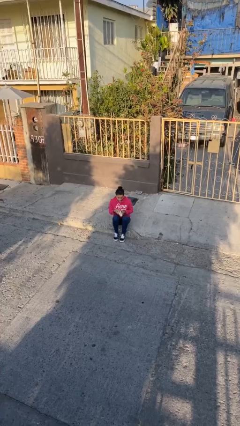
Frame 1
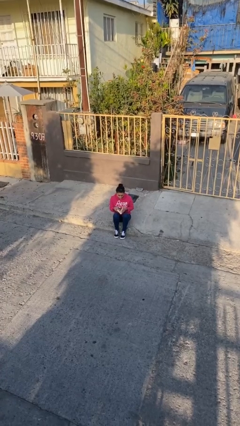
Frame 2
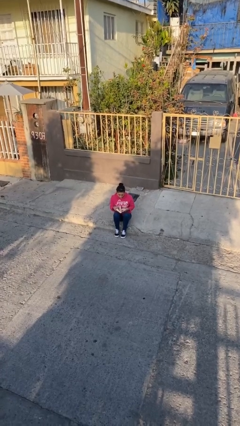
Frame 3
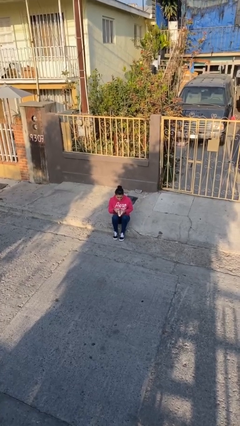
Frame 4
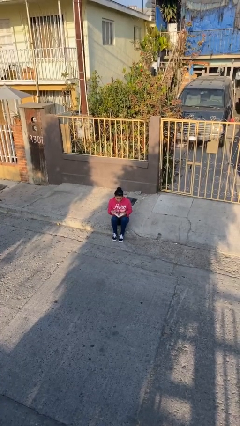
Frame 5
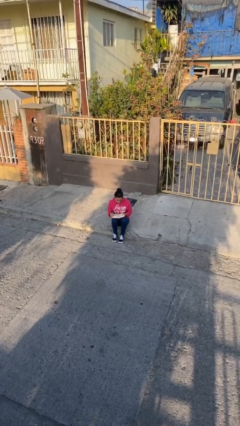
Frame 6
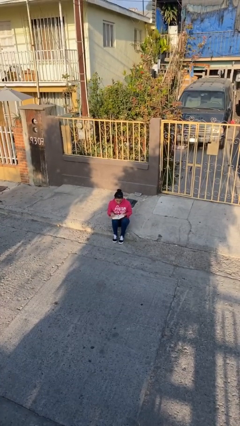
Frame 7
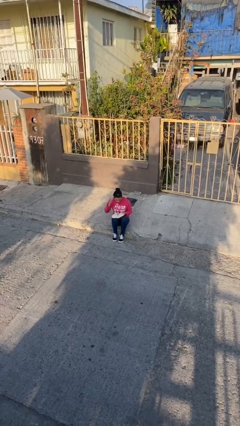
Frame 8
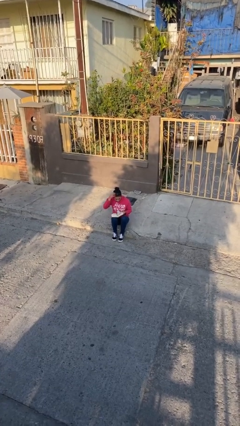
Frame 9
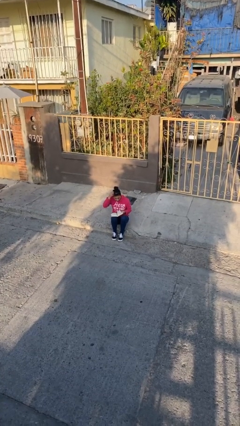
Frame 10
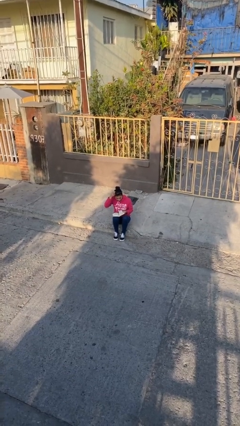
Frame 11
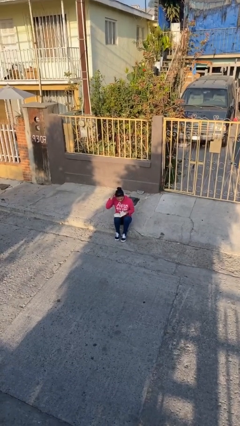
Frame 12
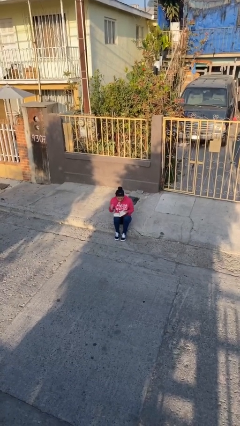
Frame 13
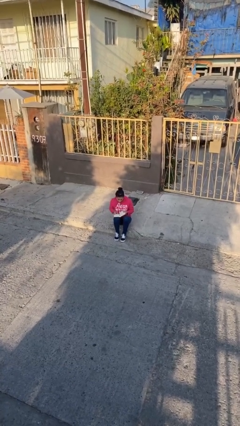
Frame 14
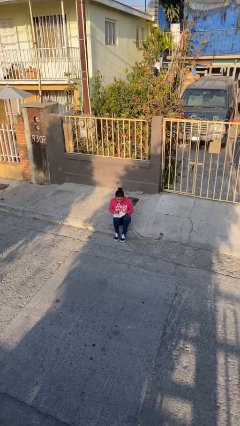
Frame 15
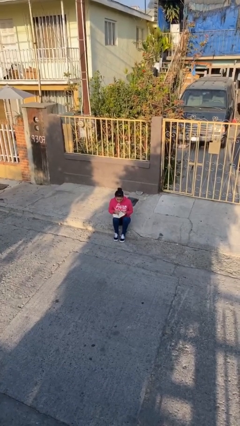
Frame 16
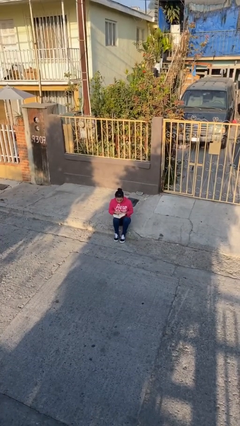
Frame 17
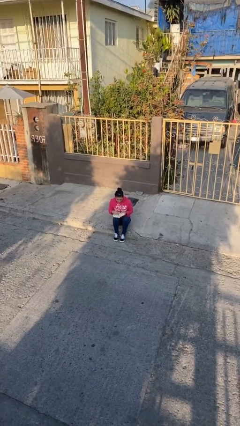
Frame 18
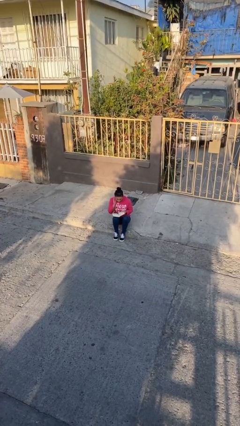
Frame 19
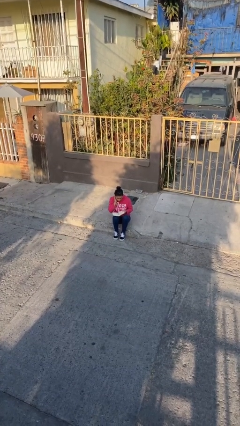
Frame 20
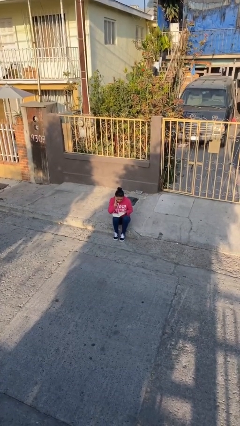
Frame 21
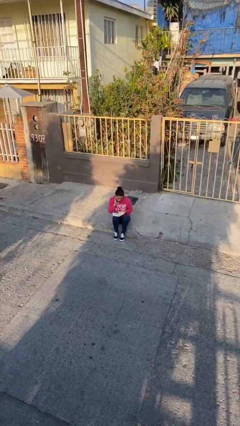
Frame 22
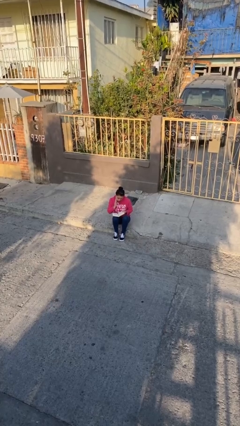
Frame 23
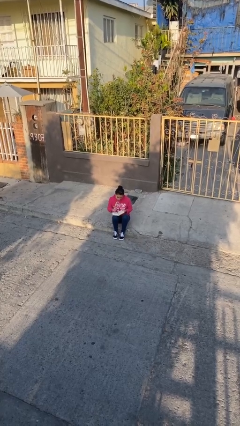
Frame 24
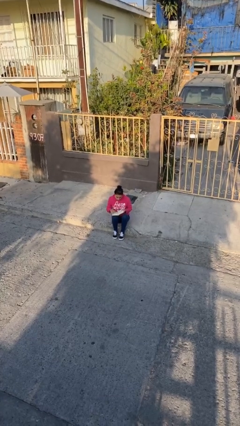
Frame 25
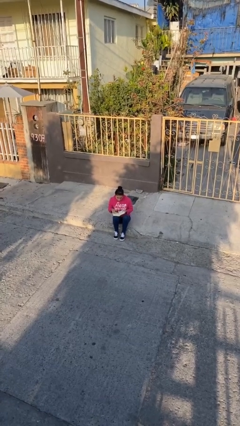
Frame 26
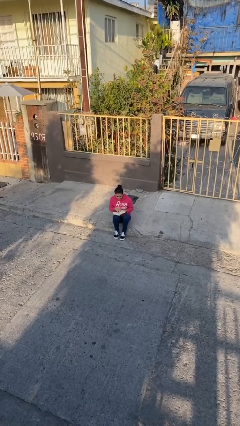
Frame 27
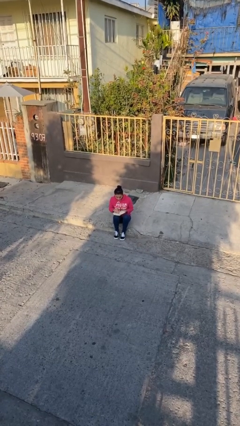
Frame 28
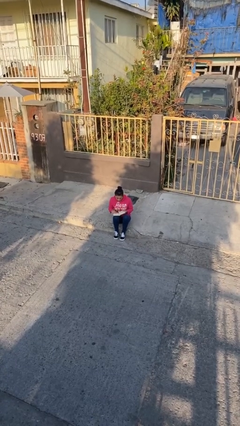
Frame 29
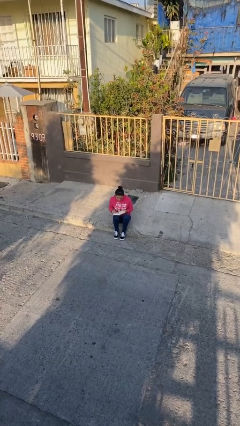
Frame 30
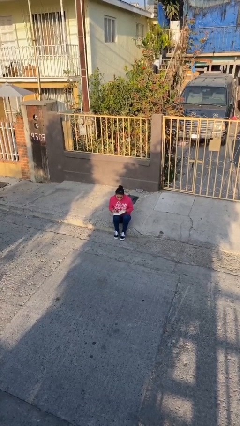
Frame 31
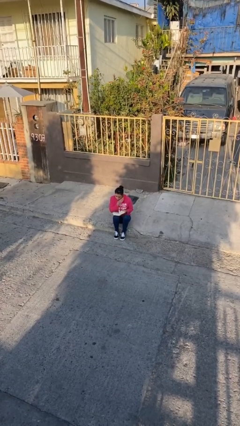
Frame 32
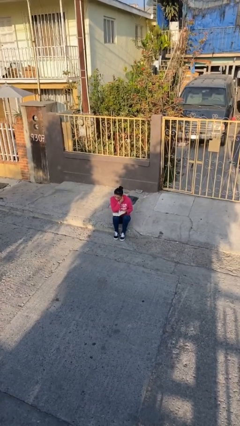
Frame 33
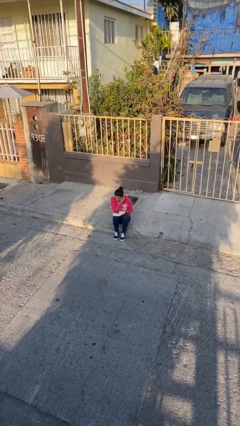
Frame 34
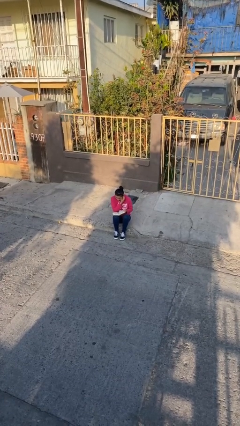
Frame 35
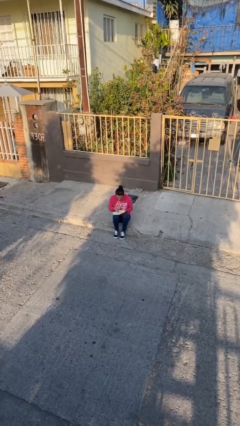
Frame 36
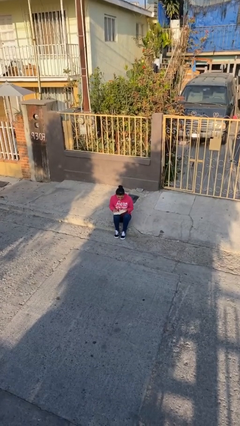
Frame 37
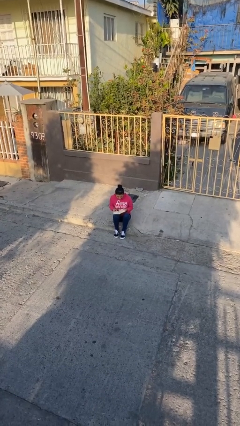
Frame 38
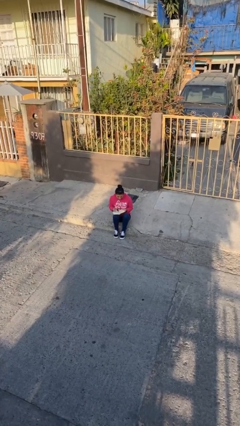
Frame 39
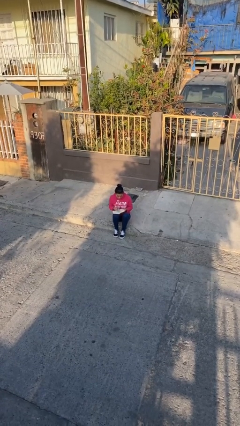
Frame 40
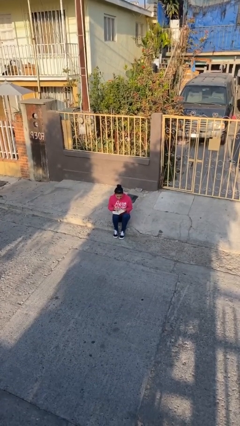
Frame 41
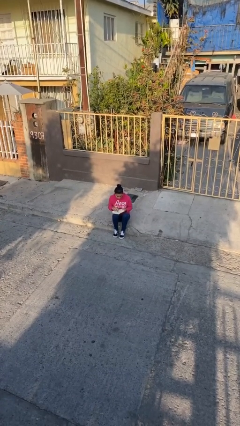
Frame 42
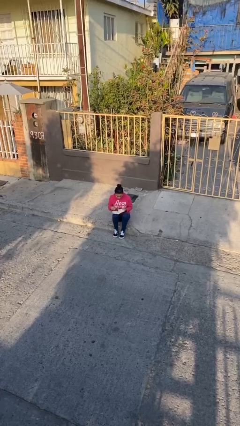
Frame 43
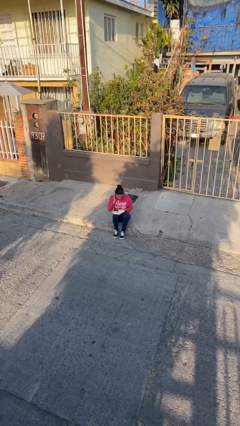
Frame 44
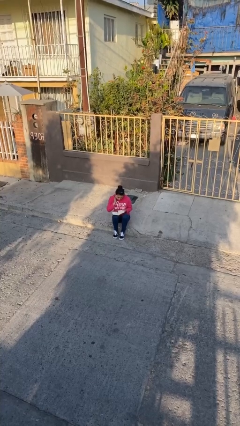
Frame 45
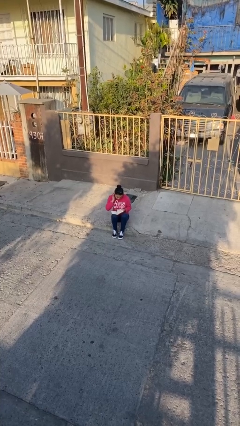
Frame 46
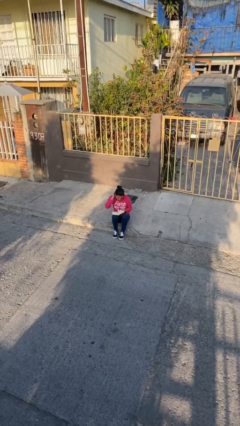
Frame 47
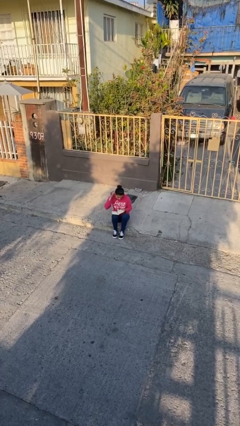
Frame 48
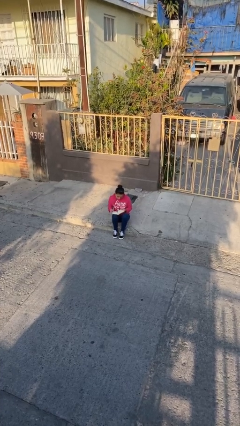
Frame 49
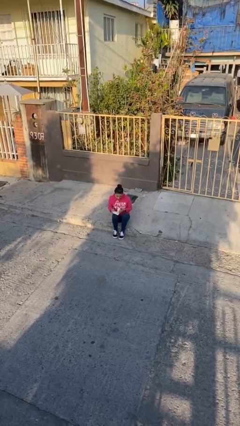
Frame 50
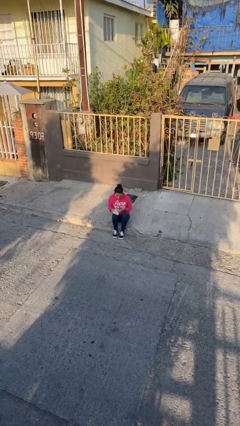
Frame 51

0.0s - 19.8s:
person reads document

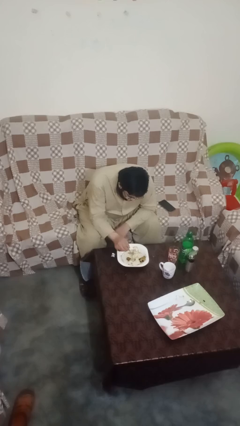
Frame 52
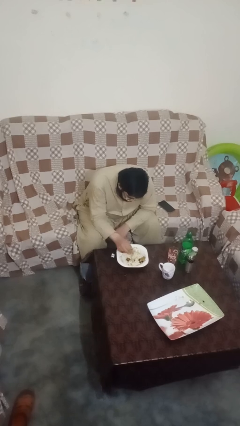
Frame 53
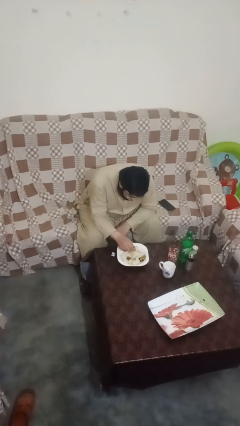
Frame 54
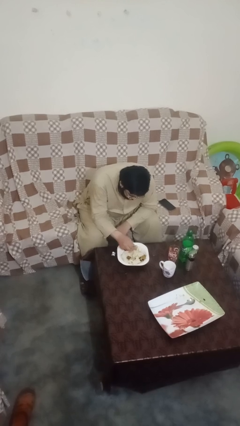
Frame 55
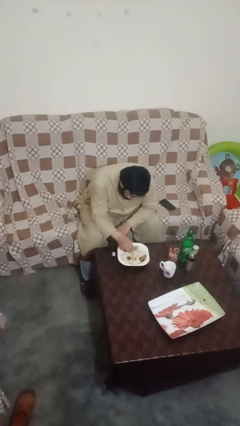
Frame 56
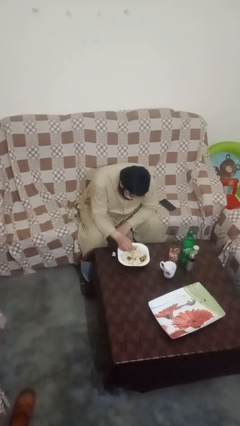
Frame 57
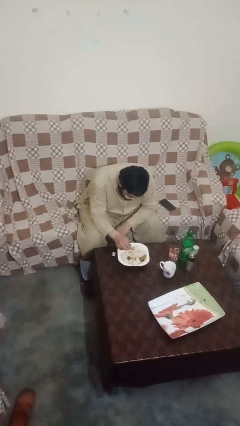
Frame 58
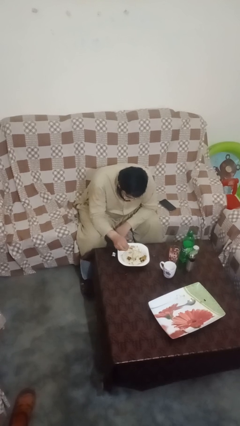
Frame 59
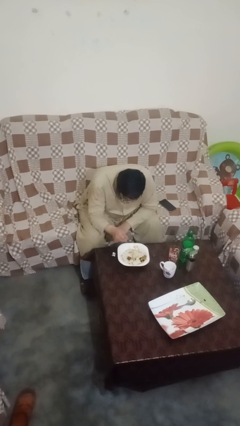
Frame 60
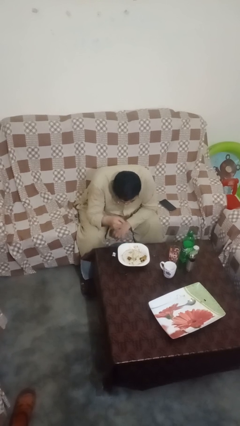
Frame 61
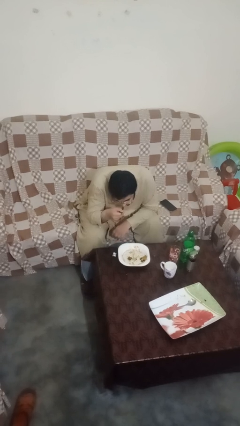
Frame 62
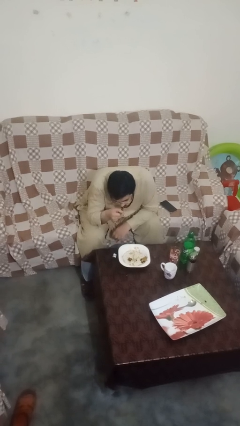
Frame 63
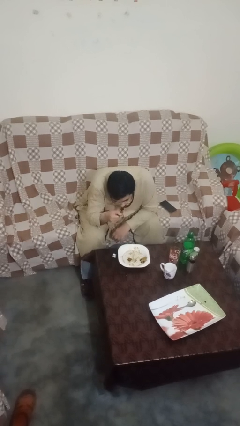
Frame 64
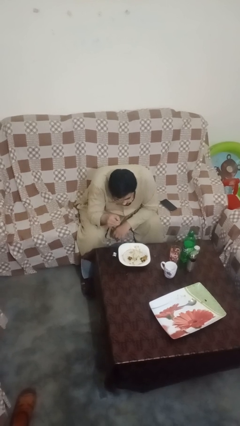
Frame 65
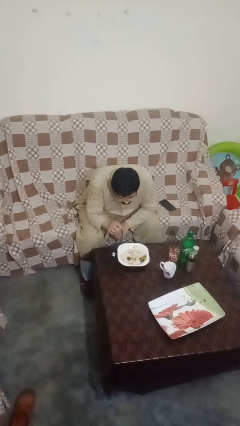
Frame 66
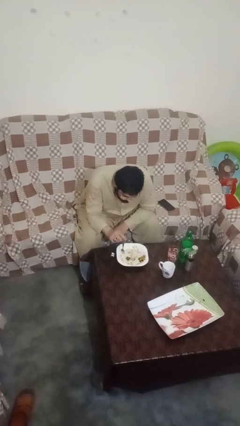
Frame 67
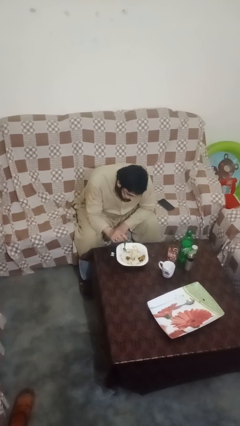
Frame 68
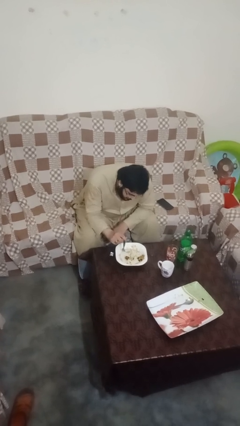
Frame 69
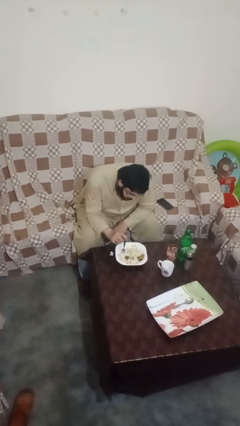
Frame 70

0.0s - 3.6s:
person eats with utensil

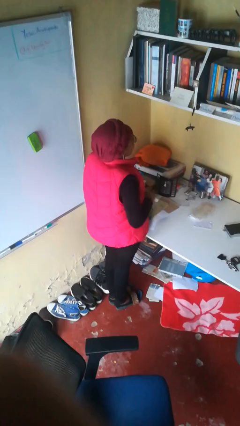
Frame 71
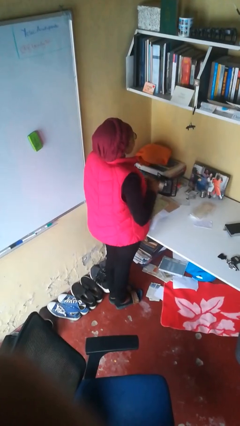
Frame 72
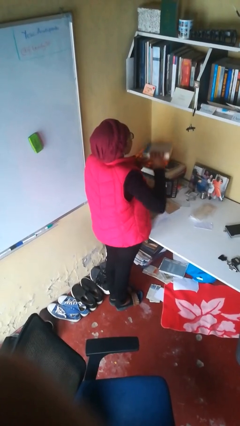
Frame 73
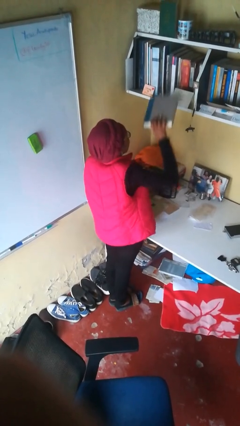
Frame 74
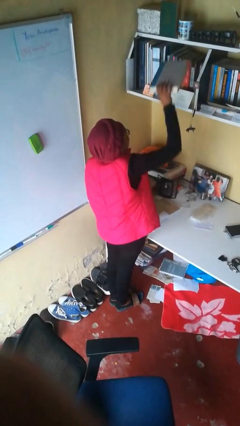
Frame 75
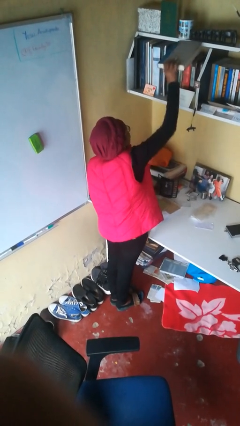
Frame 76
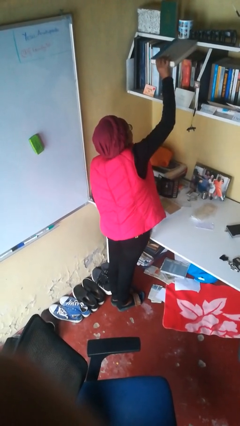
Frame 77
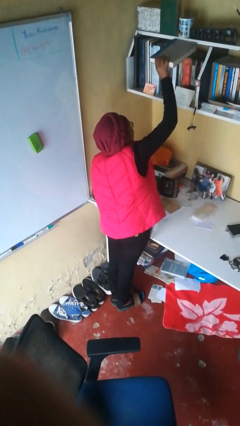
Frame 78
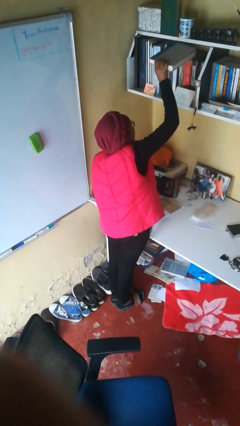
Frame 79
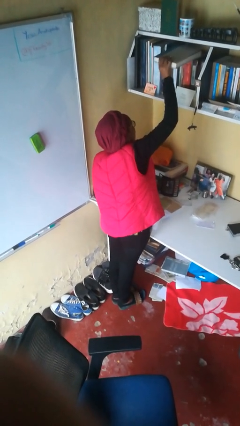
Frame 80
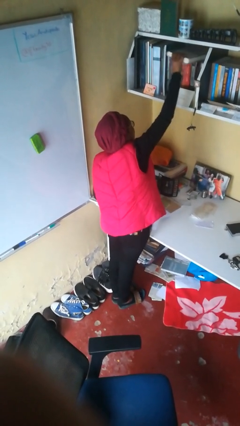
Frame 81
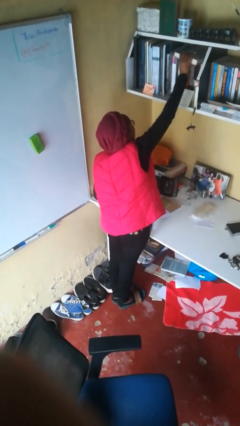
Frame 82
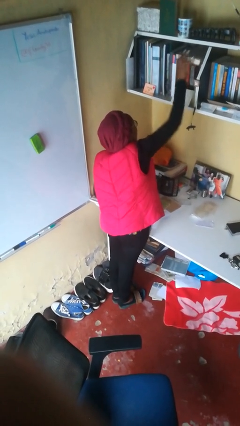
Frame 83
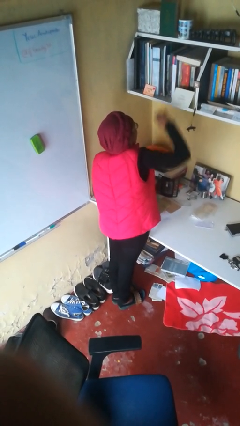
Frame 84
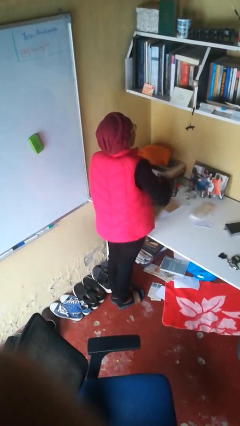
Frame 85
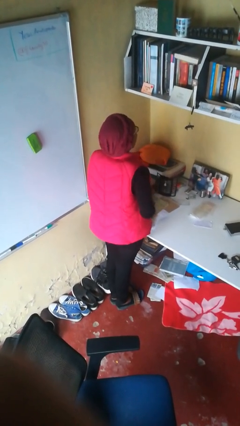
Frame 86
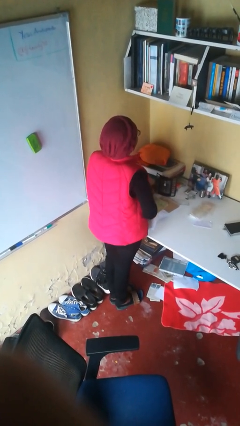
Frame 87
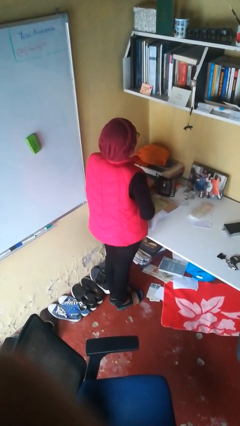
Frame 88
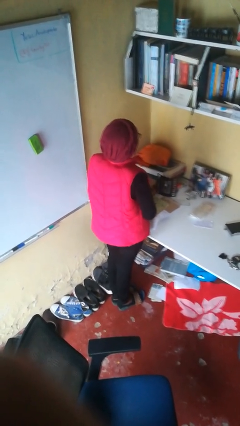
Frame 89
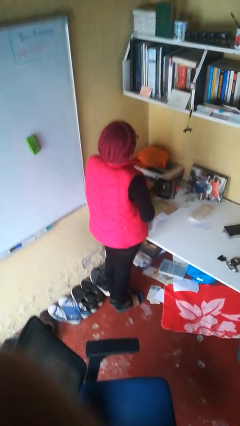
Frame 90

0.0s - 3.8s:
person puts down object on shelf

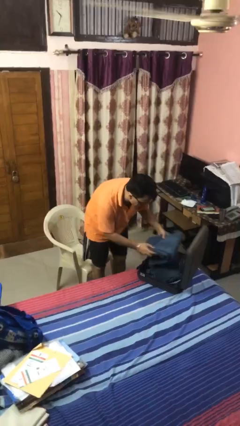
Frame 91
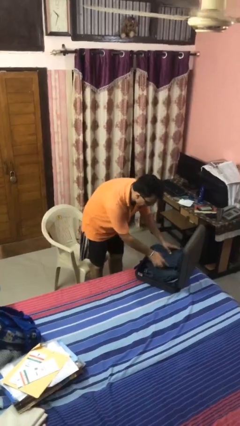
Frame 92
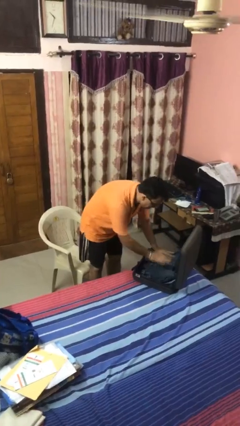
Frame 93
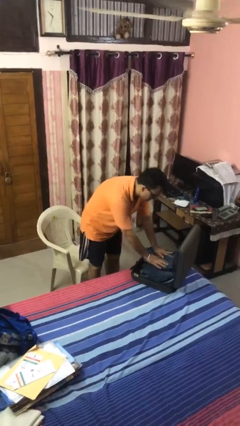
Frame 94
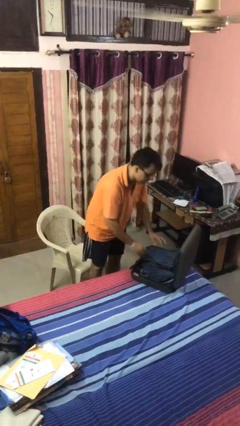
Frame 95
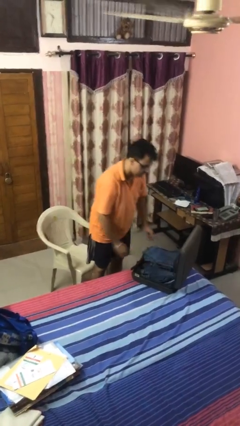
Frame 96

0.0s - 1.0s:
person loads clothes into suitcase
